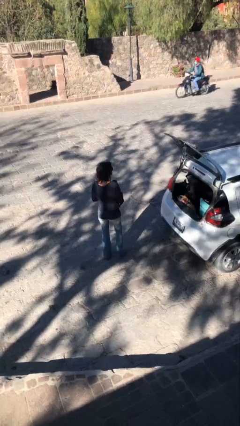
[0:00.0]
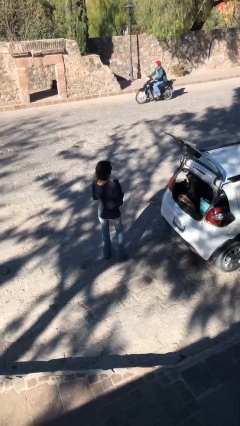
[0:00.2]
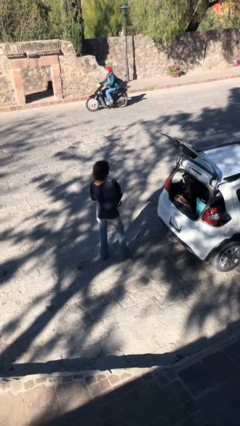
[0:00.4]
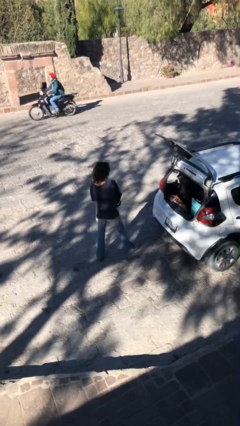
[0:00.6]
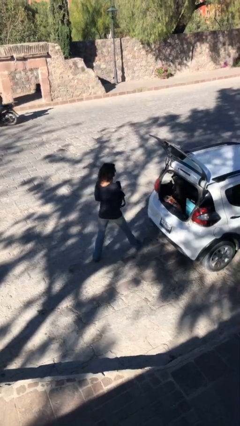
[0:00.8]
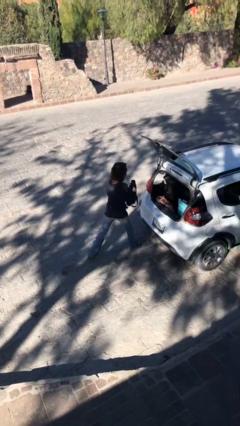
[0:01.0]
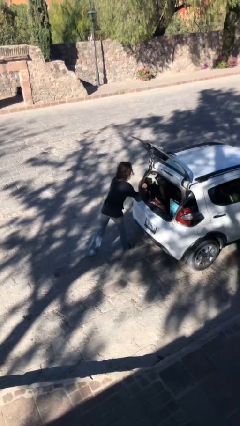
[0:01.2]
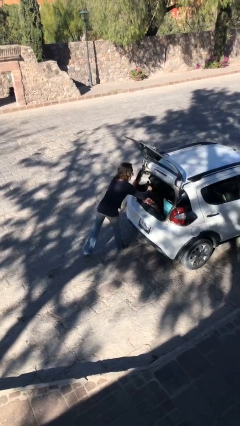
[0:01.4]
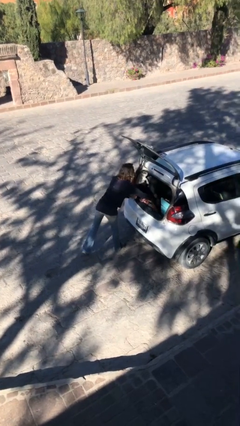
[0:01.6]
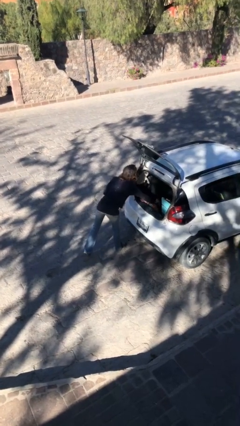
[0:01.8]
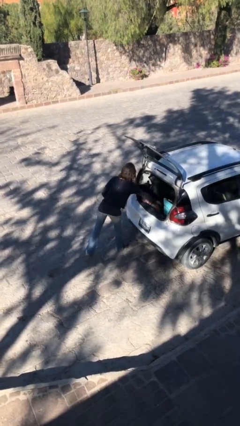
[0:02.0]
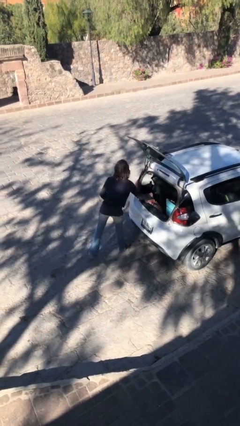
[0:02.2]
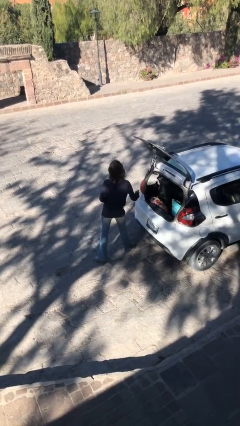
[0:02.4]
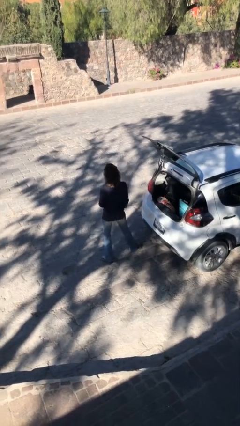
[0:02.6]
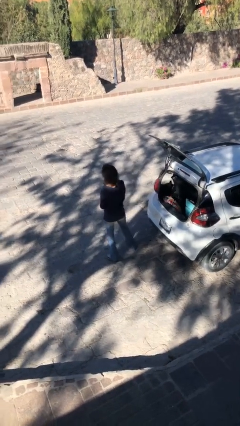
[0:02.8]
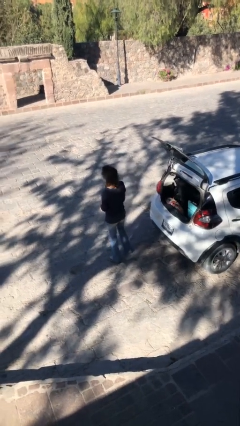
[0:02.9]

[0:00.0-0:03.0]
person loads car

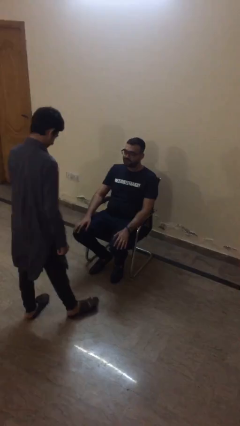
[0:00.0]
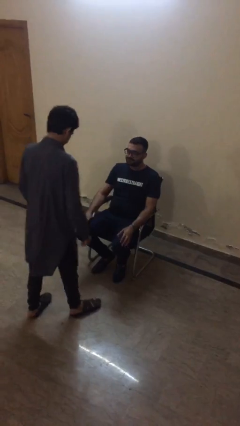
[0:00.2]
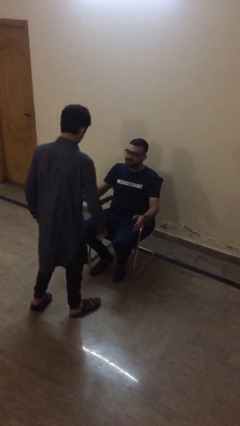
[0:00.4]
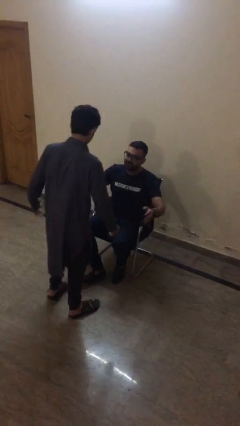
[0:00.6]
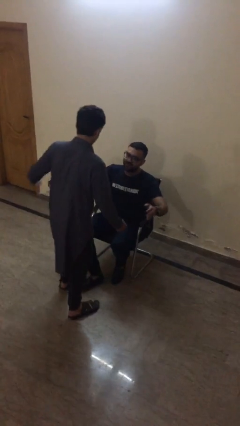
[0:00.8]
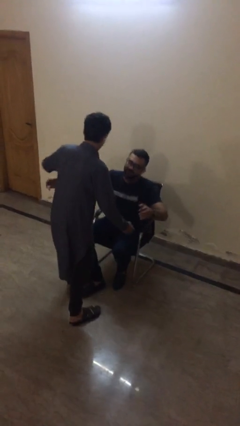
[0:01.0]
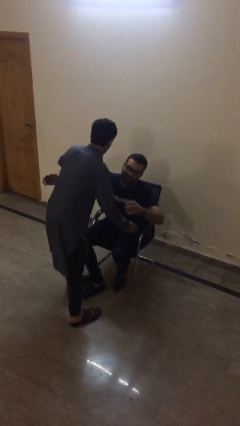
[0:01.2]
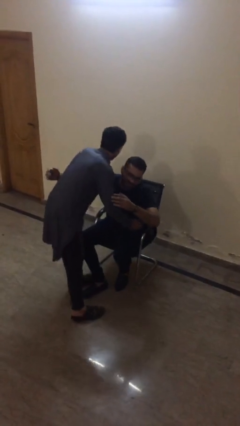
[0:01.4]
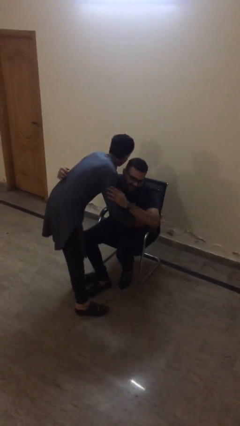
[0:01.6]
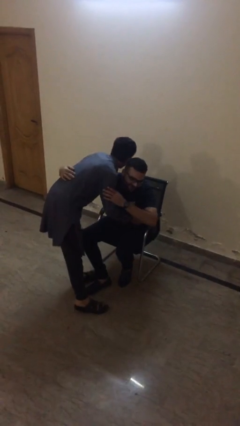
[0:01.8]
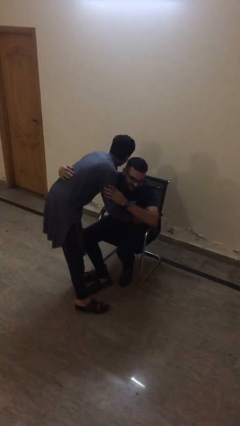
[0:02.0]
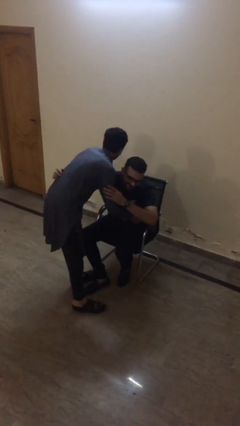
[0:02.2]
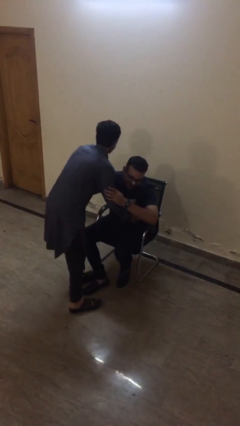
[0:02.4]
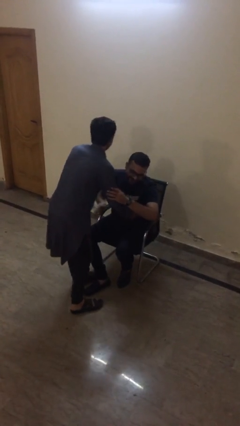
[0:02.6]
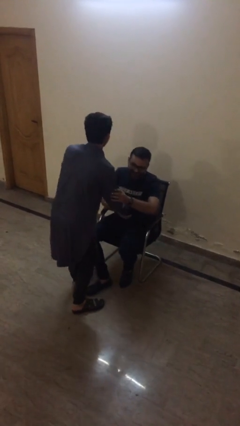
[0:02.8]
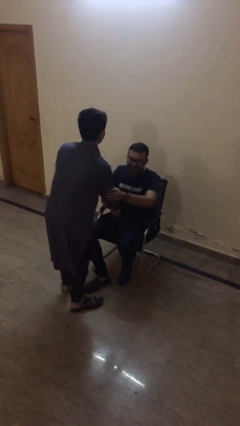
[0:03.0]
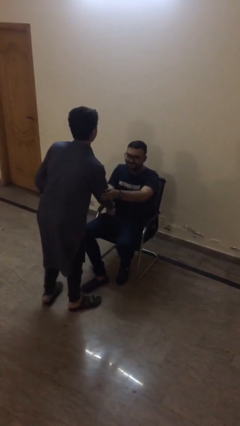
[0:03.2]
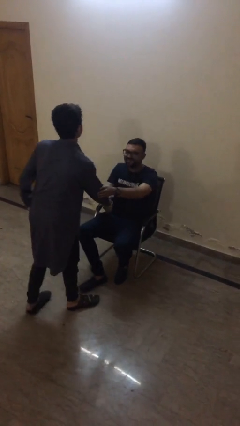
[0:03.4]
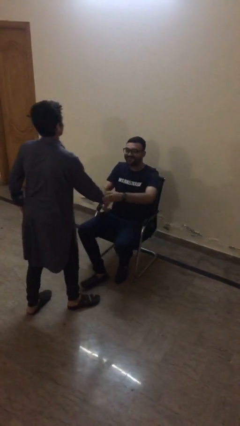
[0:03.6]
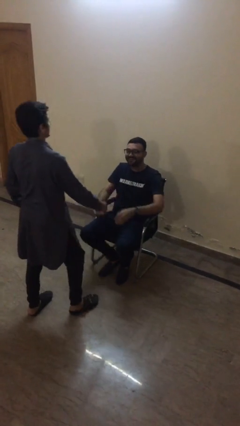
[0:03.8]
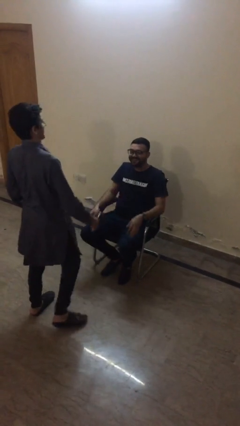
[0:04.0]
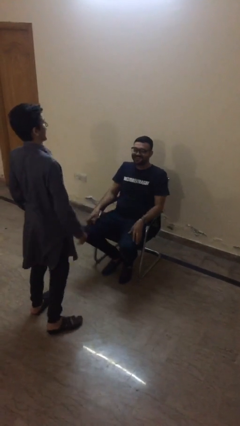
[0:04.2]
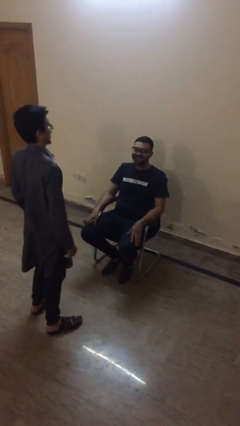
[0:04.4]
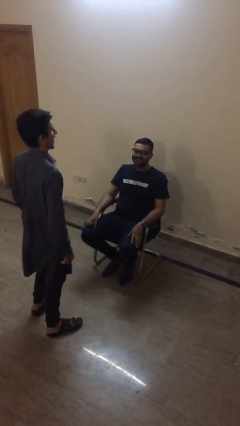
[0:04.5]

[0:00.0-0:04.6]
person embraces person

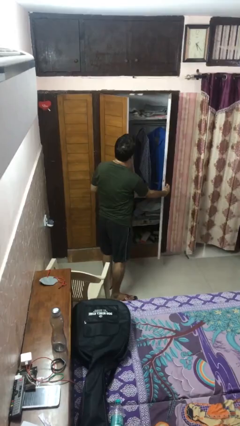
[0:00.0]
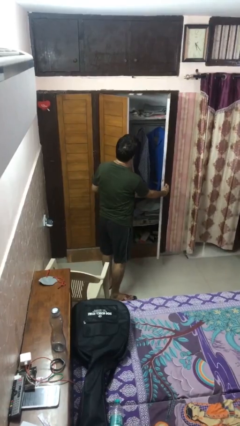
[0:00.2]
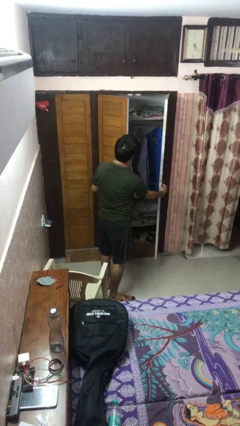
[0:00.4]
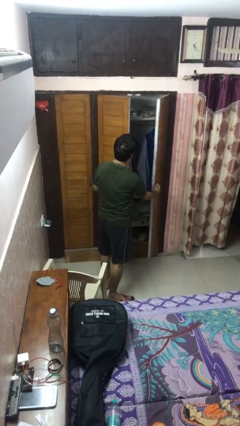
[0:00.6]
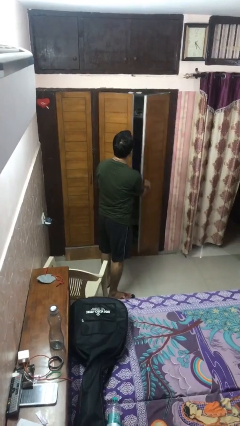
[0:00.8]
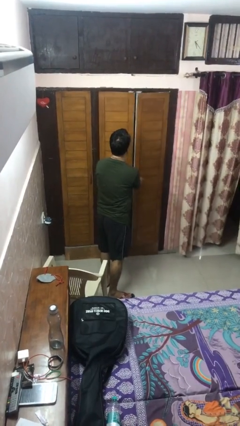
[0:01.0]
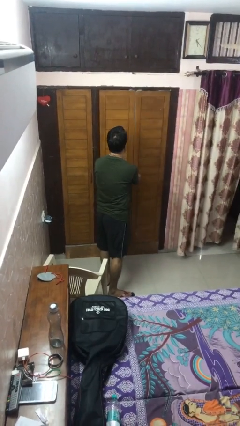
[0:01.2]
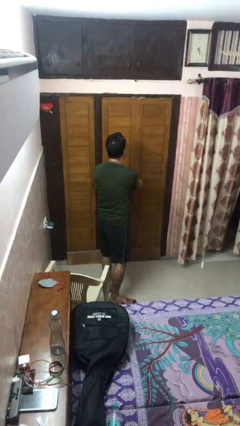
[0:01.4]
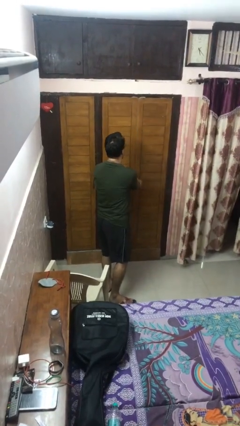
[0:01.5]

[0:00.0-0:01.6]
person closes closet door

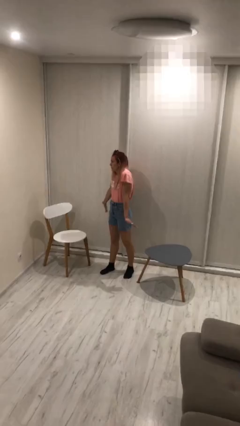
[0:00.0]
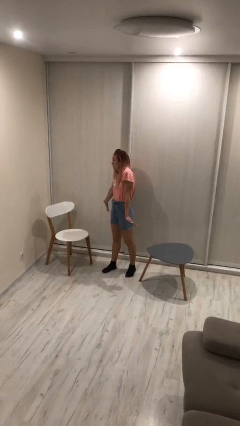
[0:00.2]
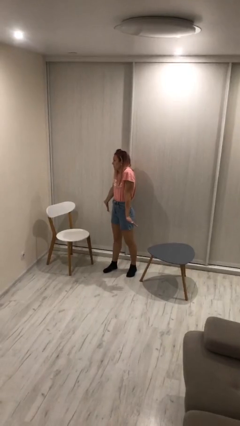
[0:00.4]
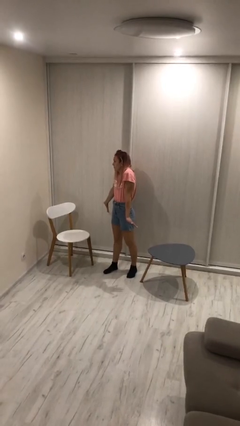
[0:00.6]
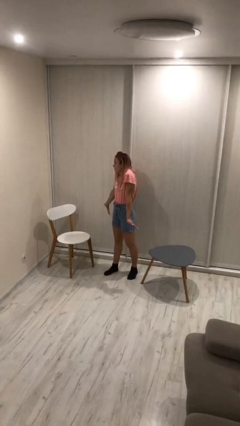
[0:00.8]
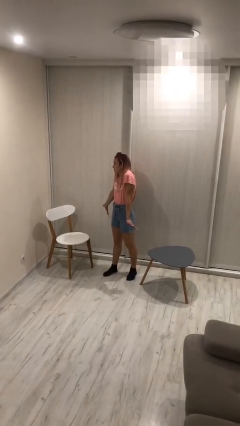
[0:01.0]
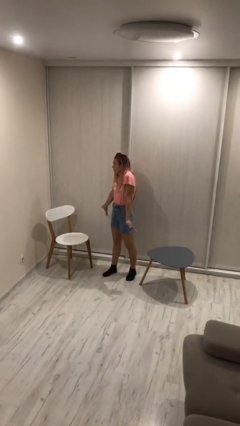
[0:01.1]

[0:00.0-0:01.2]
person shrugs

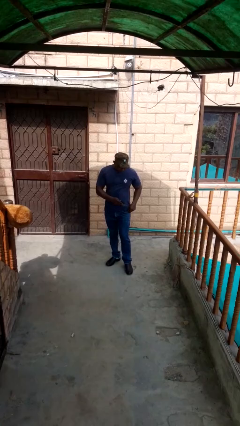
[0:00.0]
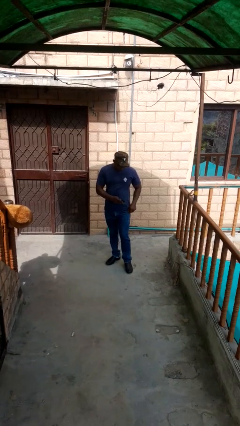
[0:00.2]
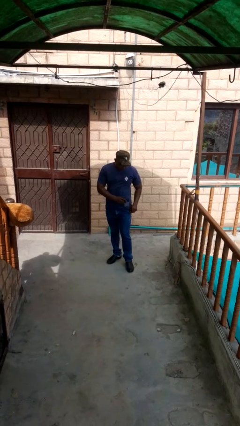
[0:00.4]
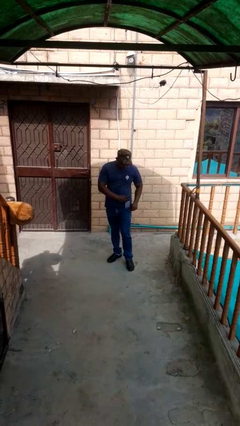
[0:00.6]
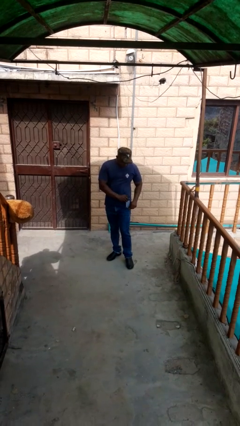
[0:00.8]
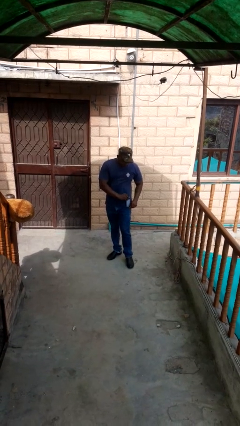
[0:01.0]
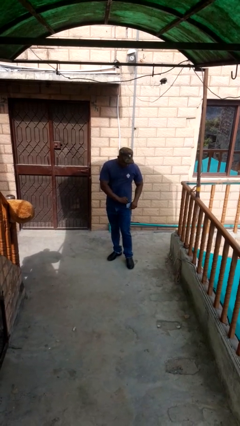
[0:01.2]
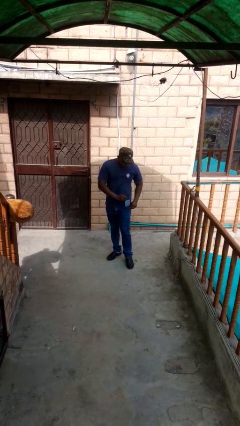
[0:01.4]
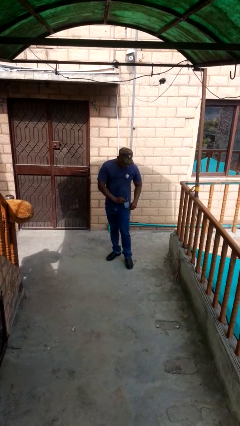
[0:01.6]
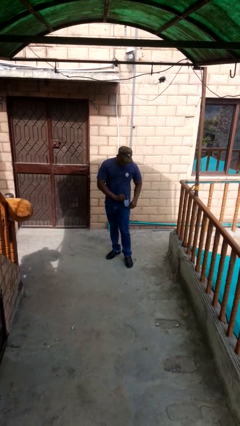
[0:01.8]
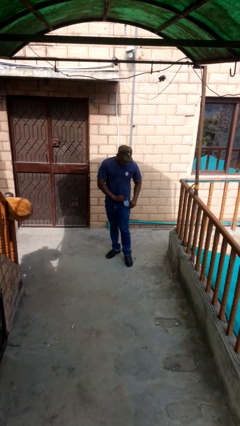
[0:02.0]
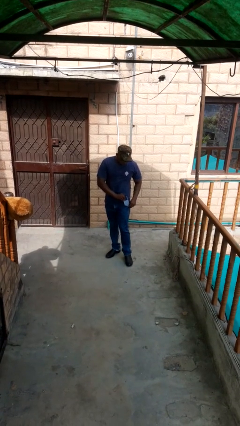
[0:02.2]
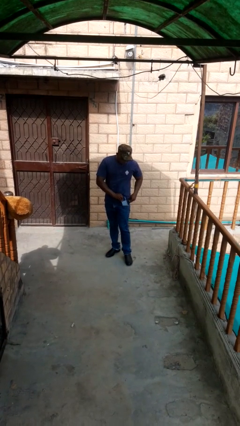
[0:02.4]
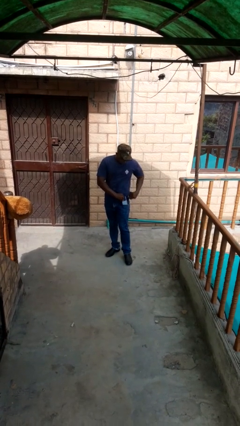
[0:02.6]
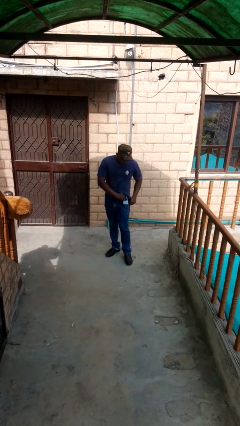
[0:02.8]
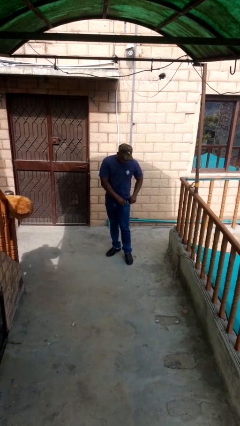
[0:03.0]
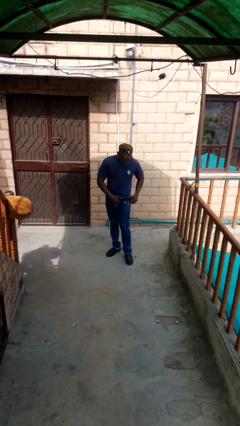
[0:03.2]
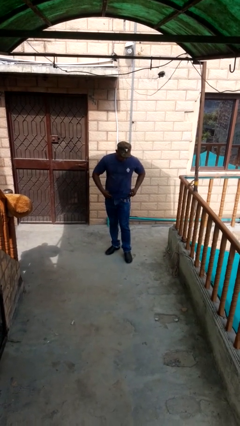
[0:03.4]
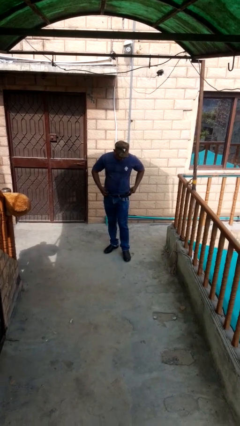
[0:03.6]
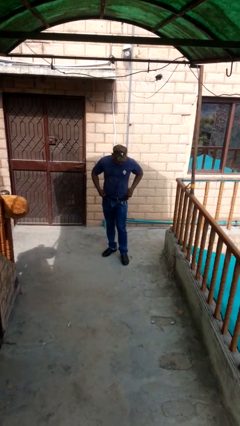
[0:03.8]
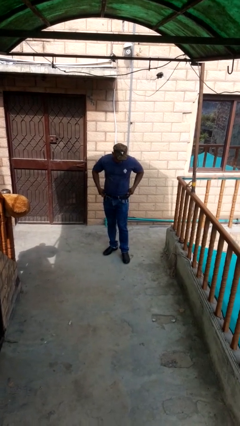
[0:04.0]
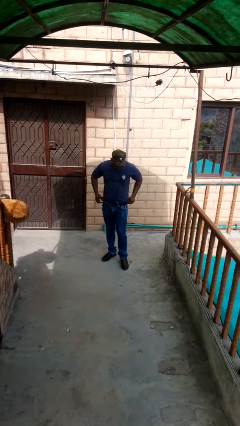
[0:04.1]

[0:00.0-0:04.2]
person puts phone into pocket

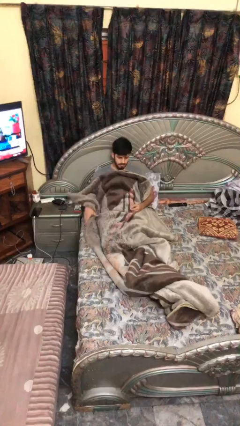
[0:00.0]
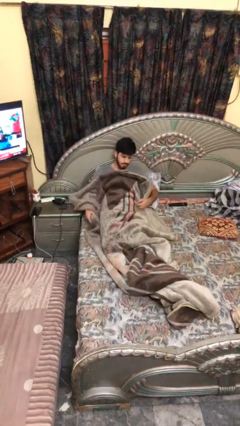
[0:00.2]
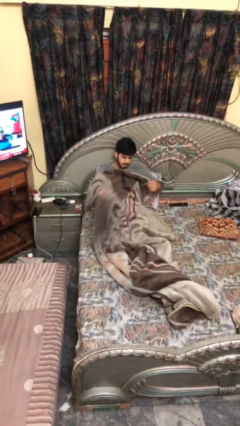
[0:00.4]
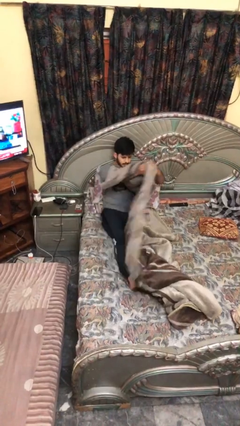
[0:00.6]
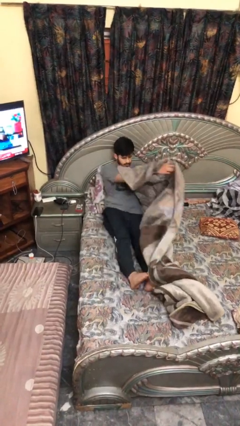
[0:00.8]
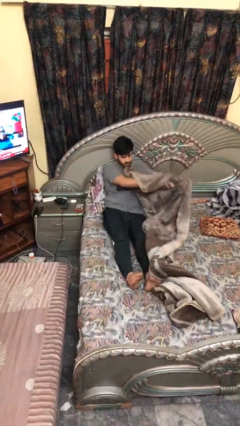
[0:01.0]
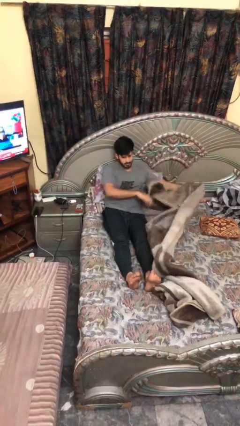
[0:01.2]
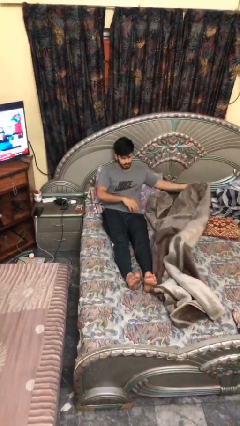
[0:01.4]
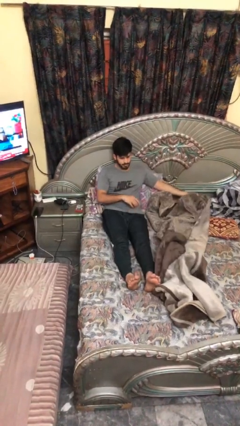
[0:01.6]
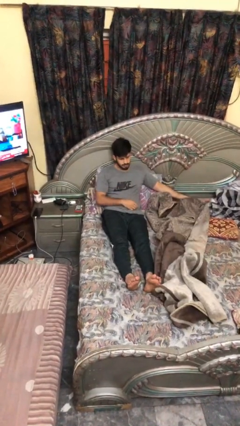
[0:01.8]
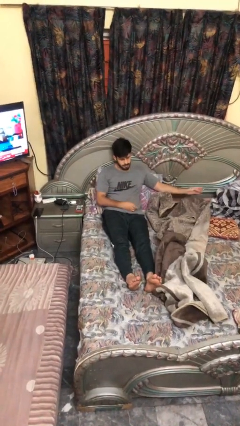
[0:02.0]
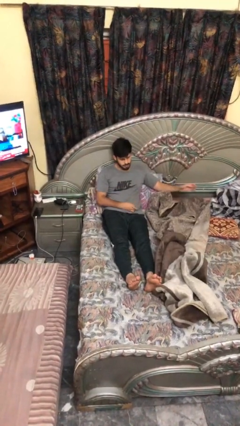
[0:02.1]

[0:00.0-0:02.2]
person uncovers with blanket

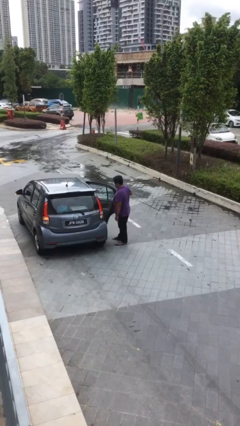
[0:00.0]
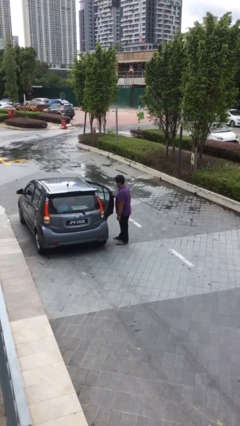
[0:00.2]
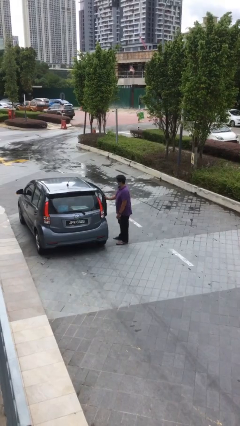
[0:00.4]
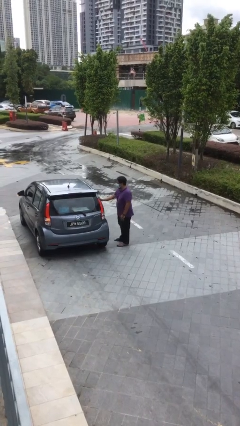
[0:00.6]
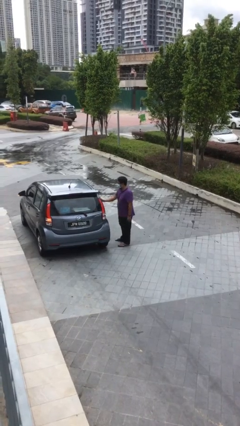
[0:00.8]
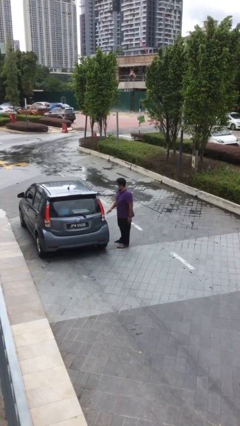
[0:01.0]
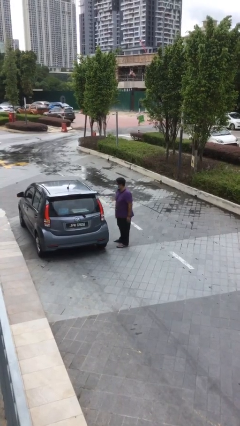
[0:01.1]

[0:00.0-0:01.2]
person closes car door
